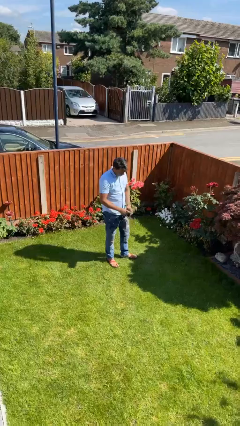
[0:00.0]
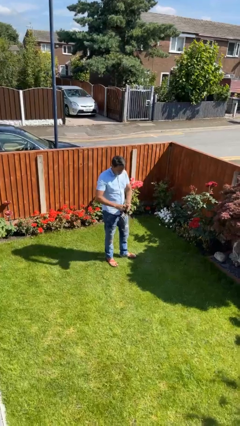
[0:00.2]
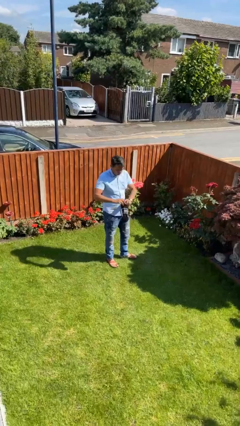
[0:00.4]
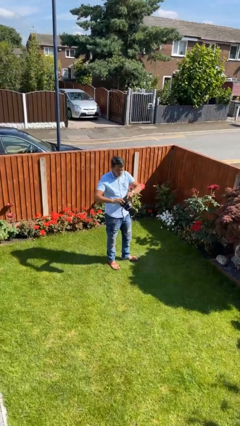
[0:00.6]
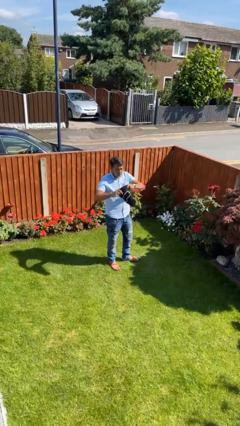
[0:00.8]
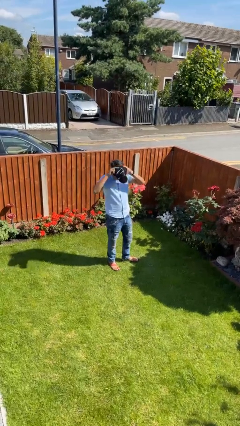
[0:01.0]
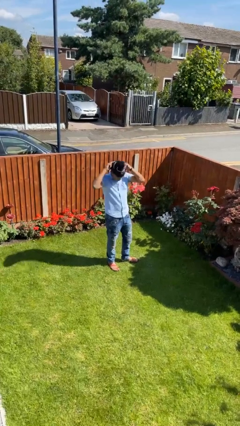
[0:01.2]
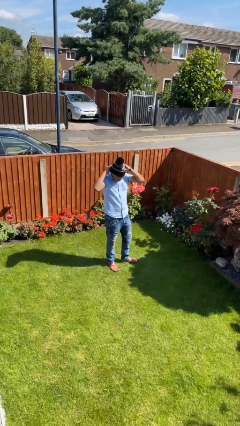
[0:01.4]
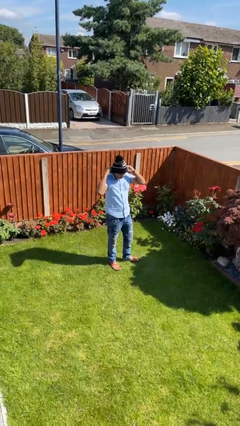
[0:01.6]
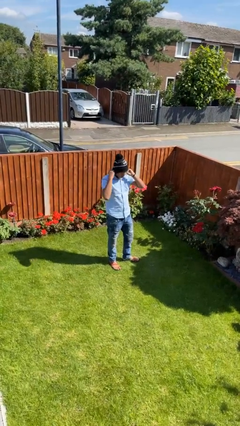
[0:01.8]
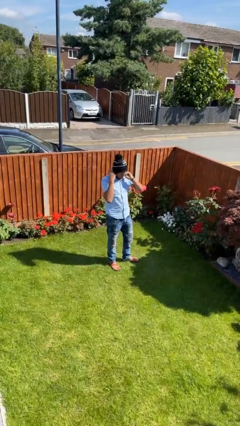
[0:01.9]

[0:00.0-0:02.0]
person puts on hat

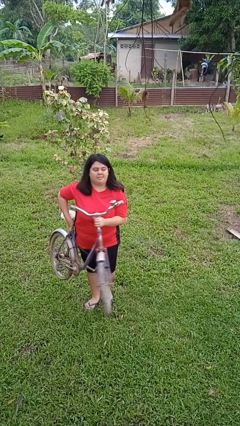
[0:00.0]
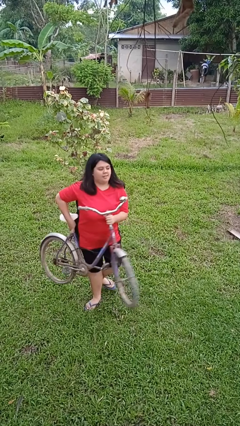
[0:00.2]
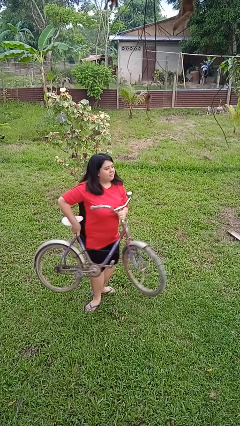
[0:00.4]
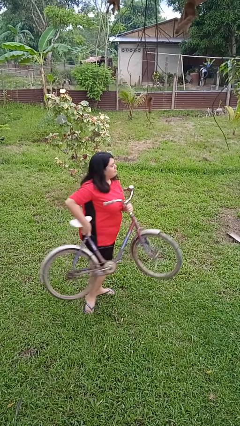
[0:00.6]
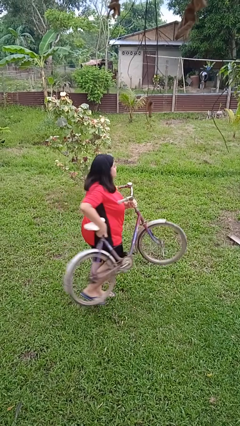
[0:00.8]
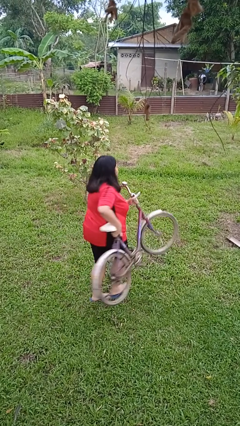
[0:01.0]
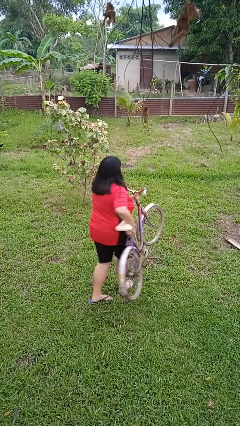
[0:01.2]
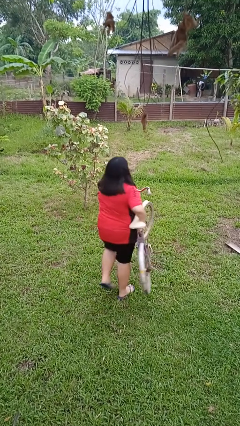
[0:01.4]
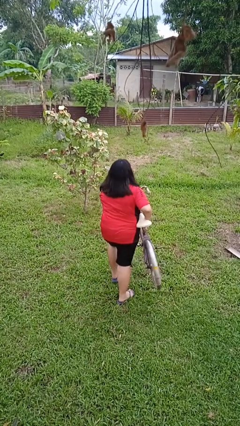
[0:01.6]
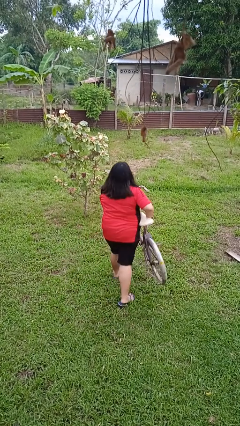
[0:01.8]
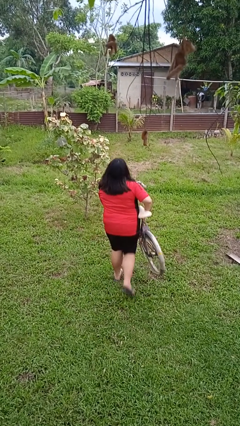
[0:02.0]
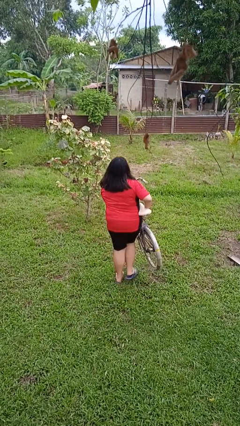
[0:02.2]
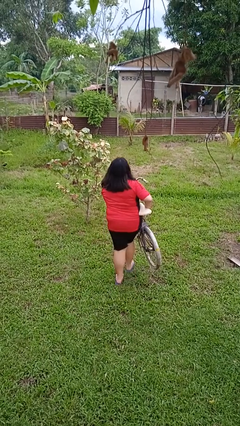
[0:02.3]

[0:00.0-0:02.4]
person carries bicycle

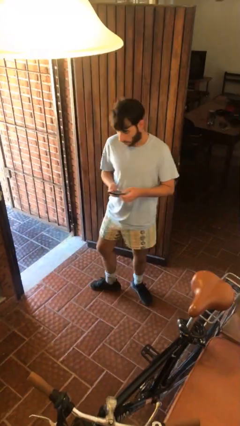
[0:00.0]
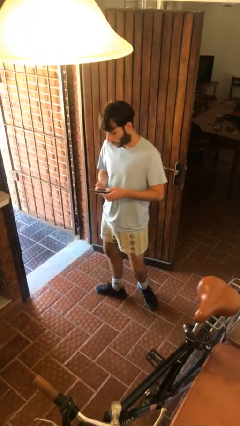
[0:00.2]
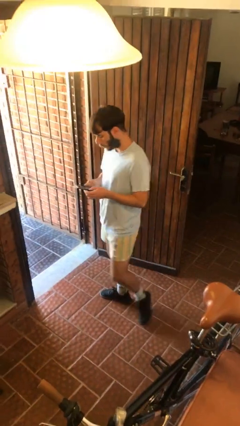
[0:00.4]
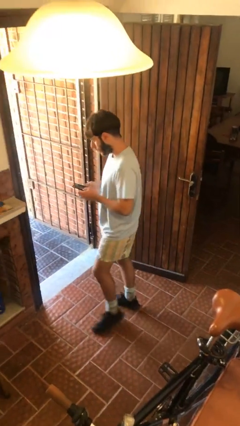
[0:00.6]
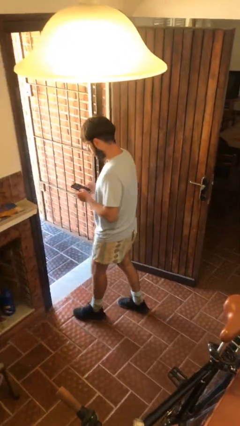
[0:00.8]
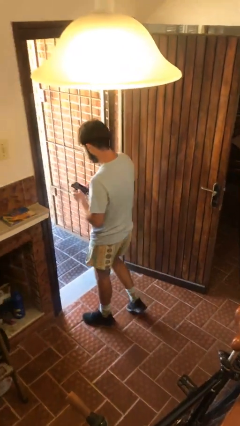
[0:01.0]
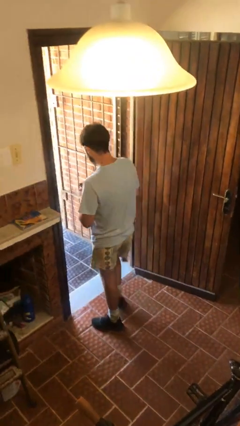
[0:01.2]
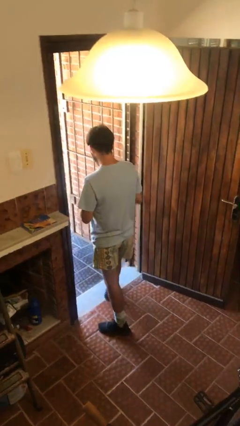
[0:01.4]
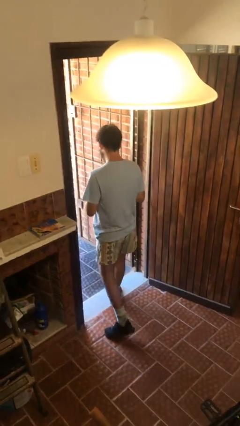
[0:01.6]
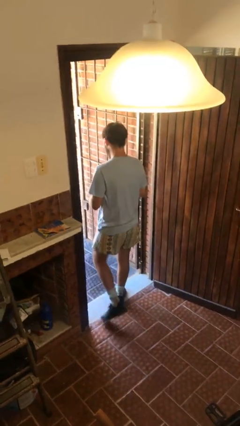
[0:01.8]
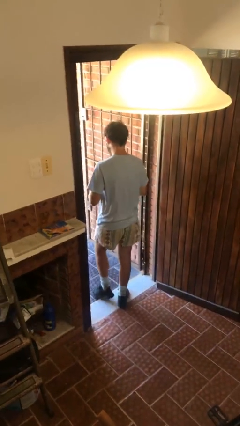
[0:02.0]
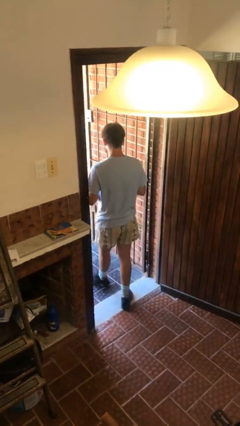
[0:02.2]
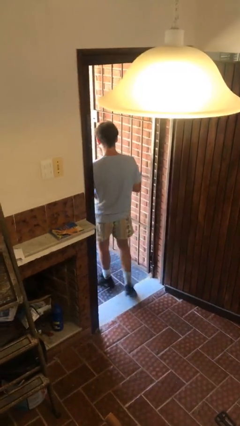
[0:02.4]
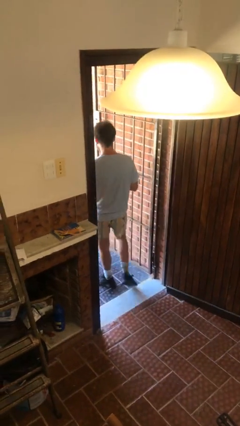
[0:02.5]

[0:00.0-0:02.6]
person exits scene through structure

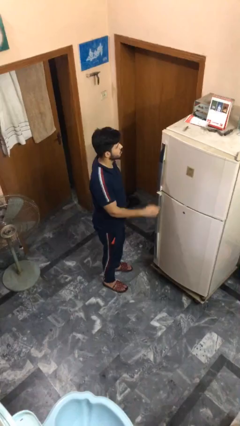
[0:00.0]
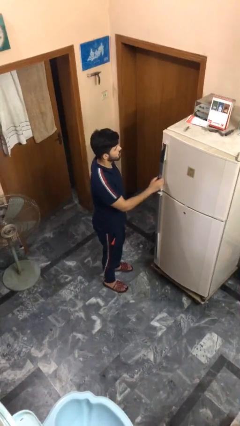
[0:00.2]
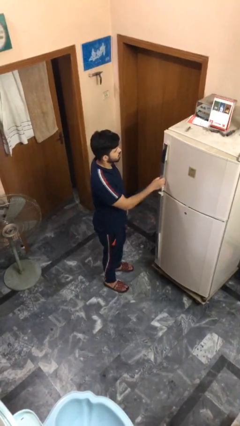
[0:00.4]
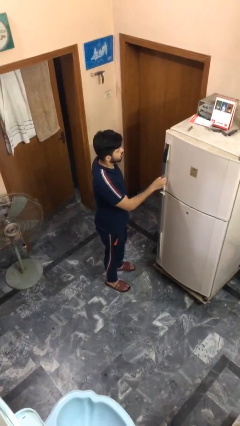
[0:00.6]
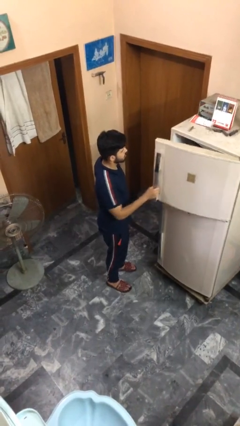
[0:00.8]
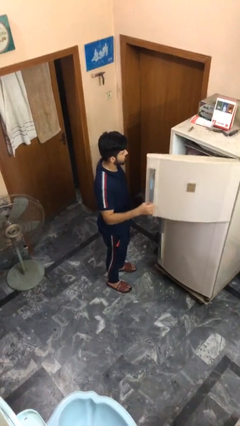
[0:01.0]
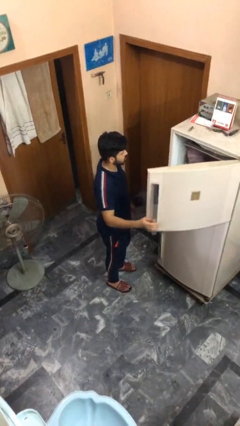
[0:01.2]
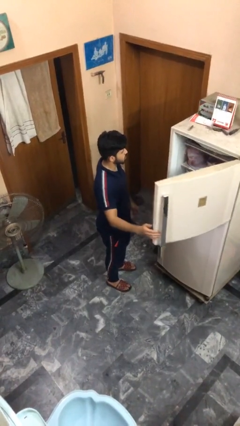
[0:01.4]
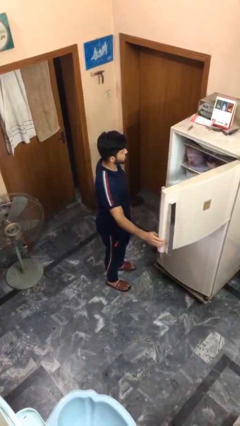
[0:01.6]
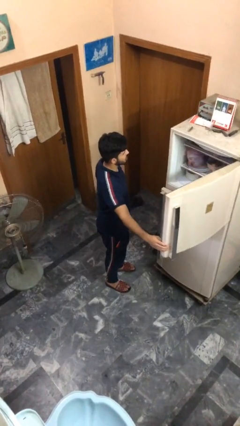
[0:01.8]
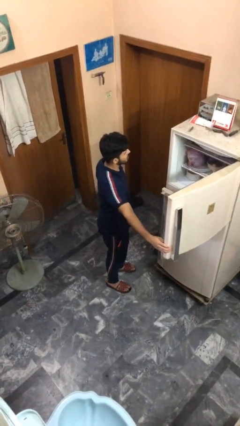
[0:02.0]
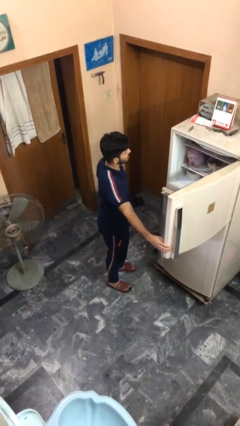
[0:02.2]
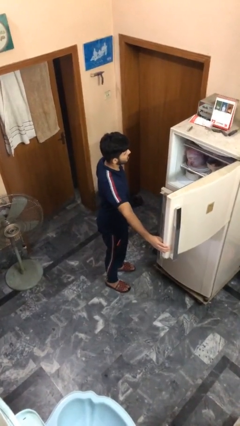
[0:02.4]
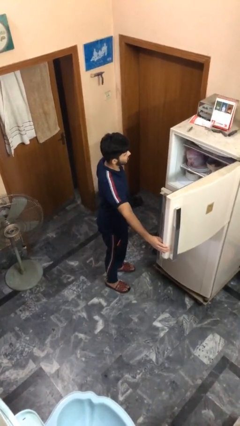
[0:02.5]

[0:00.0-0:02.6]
person opens refrigerator

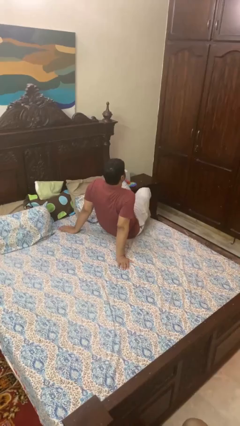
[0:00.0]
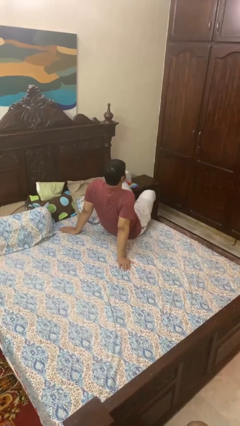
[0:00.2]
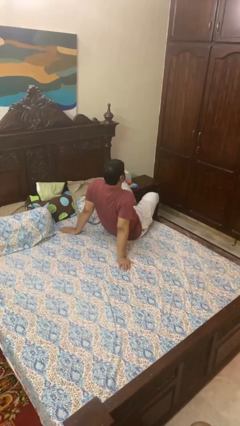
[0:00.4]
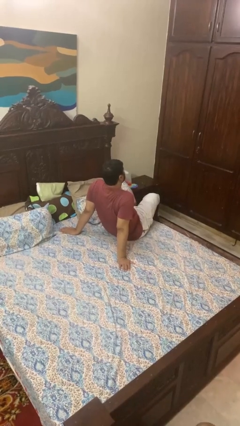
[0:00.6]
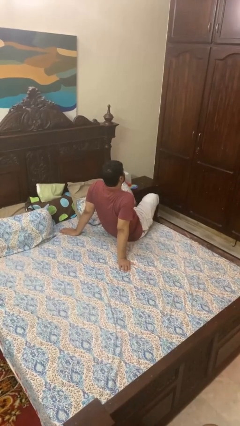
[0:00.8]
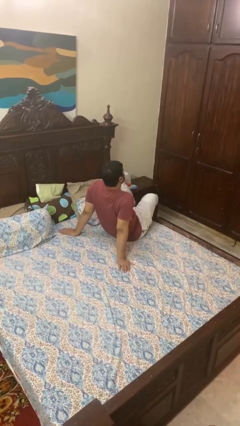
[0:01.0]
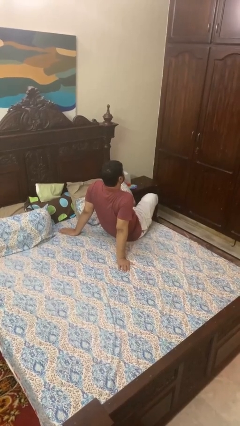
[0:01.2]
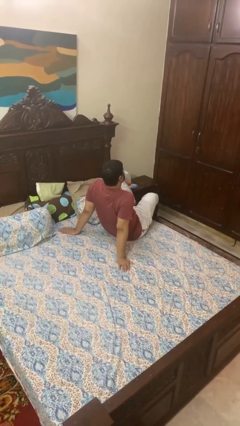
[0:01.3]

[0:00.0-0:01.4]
person crosses legs

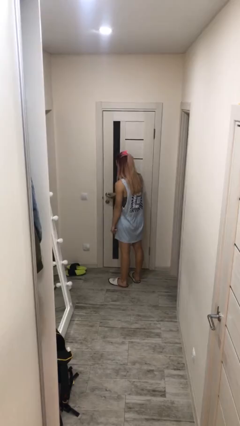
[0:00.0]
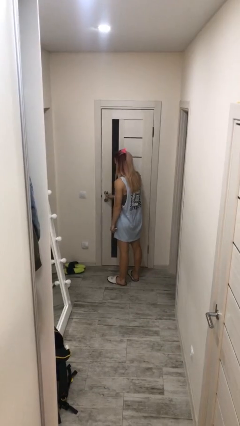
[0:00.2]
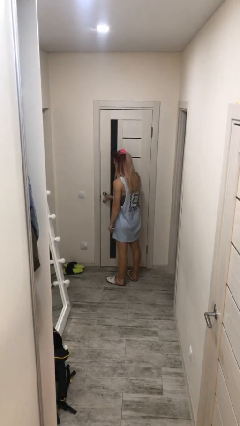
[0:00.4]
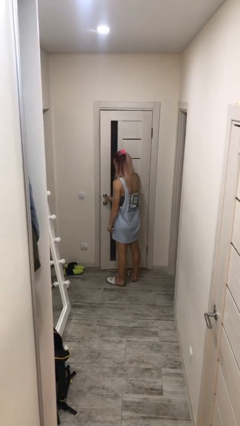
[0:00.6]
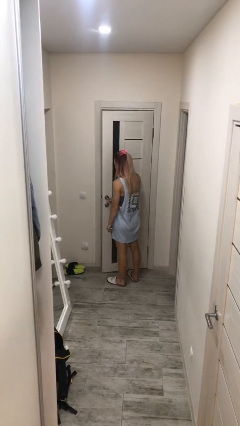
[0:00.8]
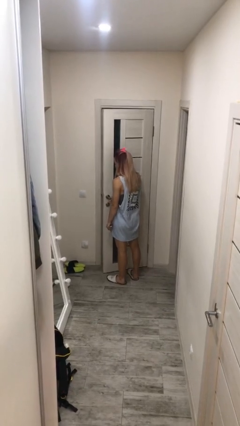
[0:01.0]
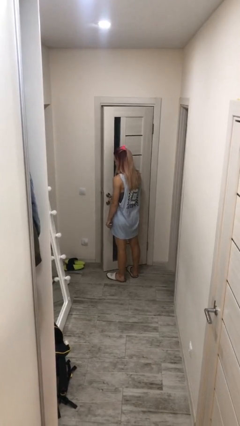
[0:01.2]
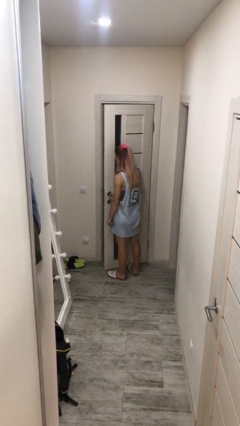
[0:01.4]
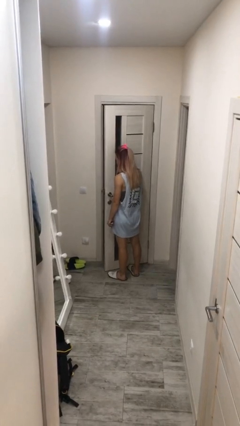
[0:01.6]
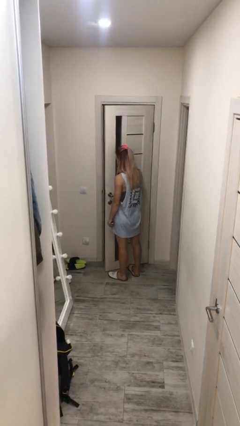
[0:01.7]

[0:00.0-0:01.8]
person opens facility door

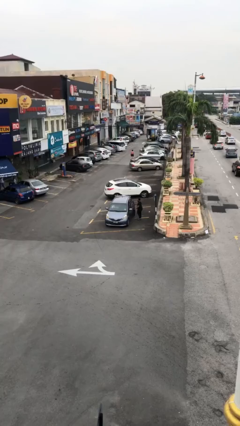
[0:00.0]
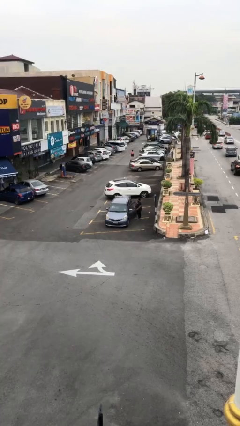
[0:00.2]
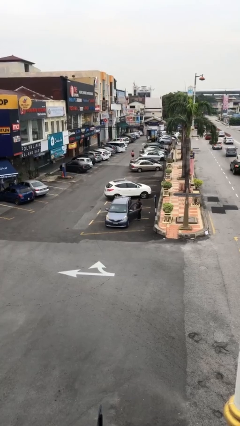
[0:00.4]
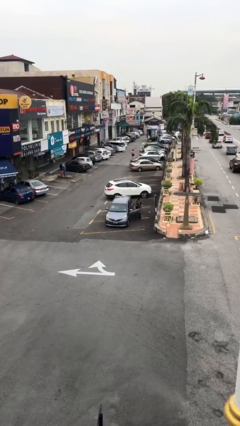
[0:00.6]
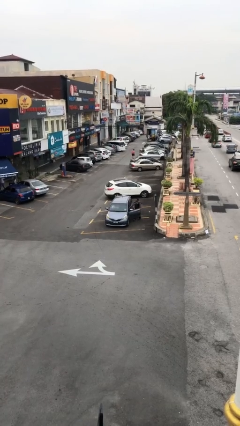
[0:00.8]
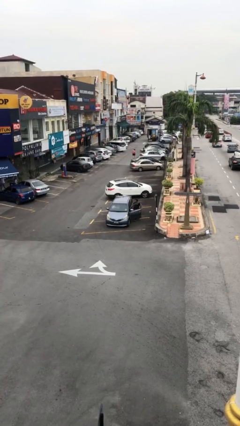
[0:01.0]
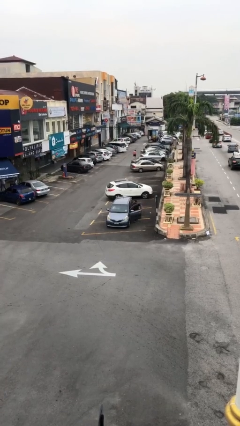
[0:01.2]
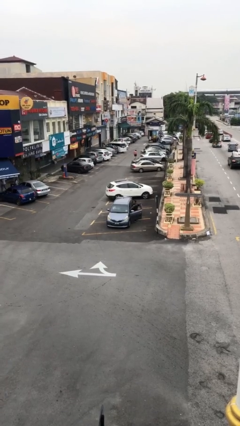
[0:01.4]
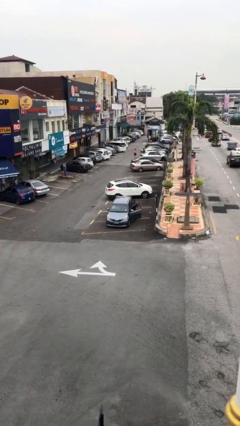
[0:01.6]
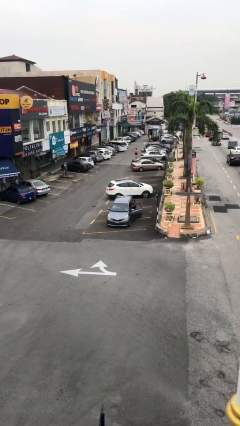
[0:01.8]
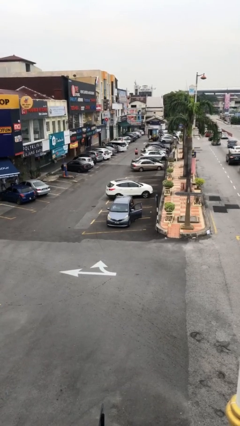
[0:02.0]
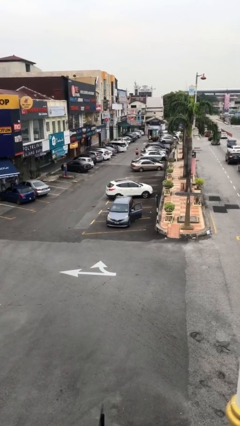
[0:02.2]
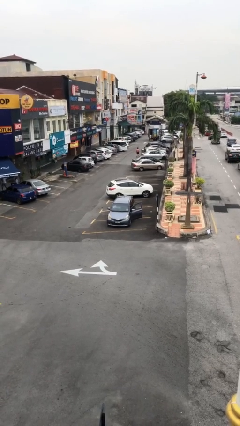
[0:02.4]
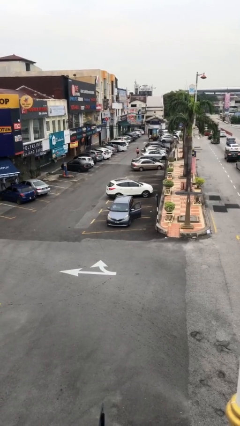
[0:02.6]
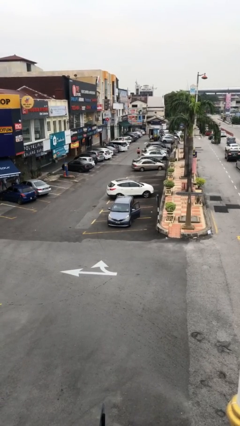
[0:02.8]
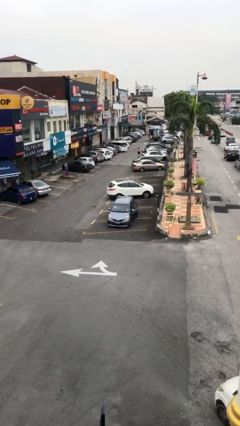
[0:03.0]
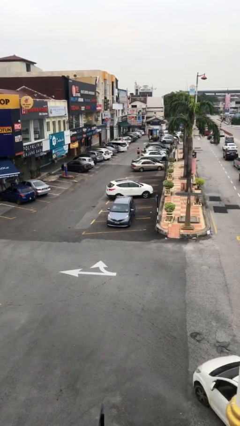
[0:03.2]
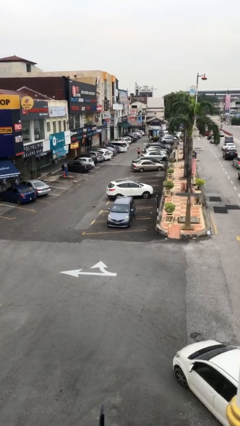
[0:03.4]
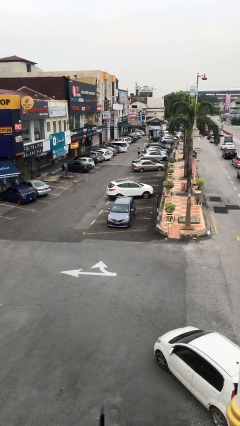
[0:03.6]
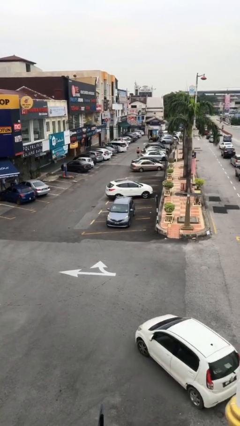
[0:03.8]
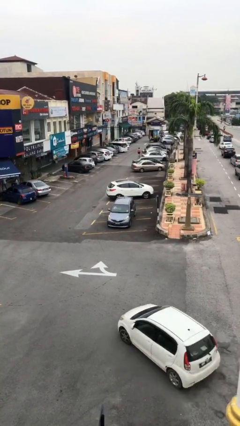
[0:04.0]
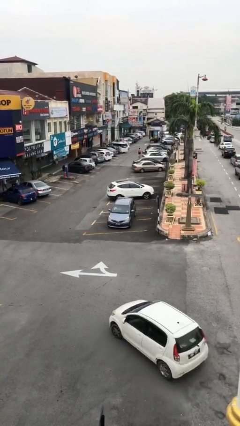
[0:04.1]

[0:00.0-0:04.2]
car picks up person

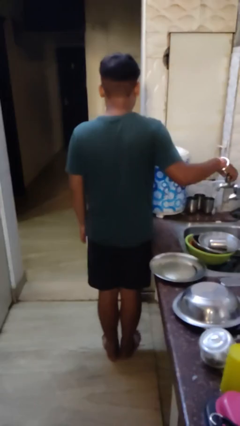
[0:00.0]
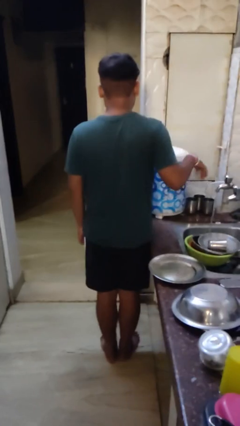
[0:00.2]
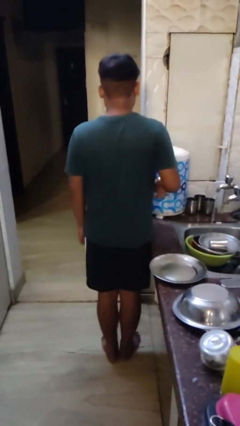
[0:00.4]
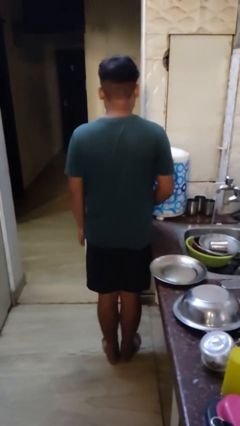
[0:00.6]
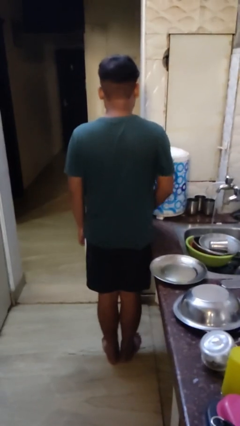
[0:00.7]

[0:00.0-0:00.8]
person turns on faucet
